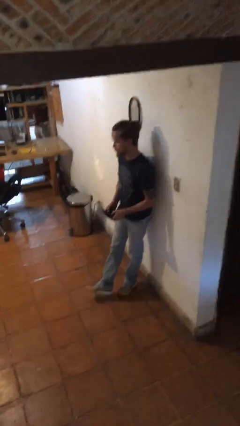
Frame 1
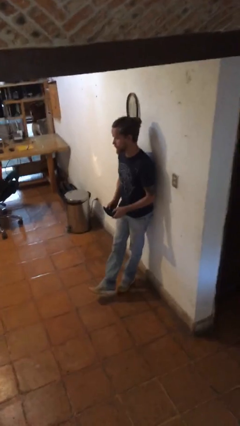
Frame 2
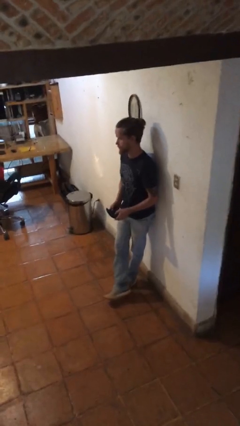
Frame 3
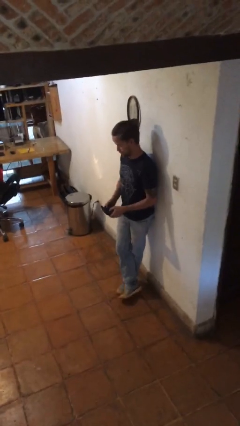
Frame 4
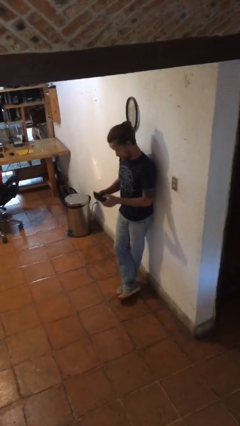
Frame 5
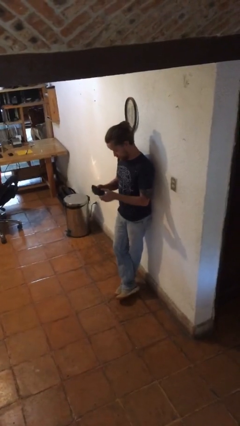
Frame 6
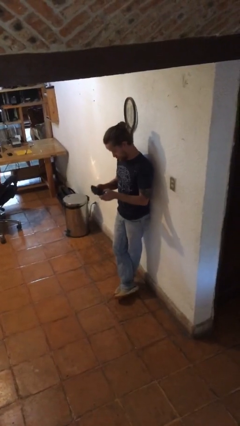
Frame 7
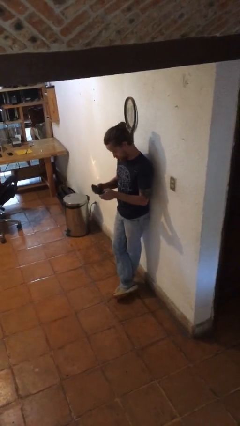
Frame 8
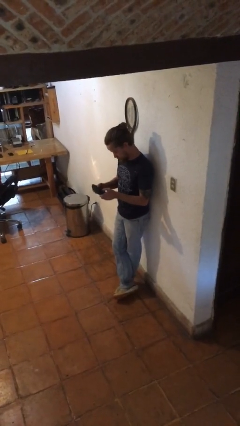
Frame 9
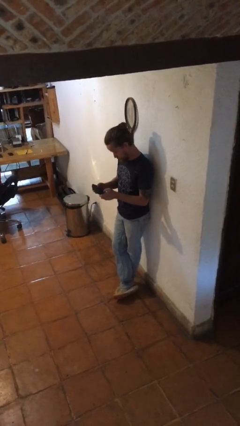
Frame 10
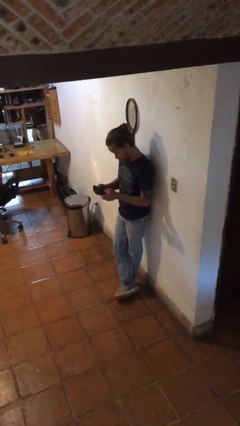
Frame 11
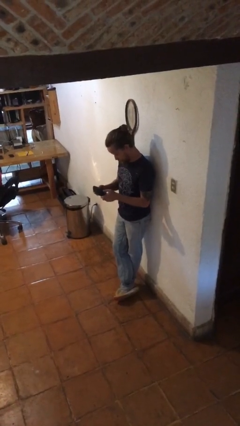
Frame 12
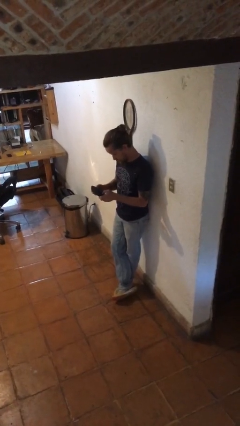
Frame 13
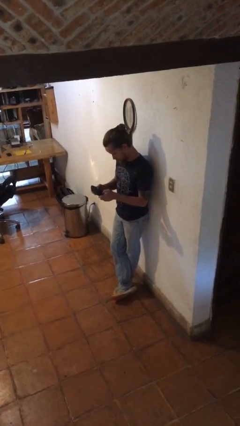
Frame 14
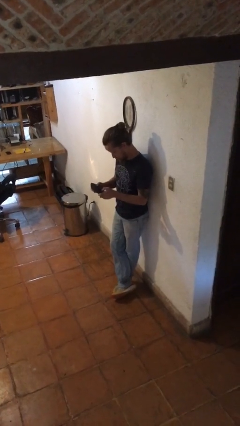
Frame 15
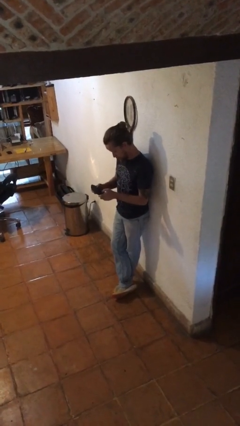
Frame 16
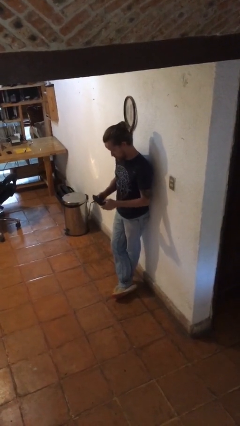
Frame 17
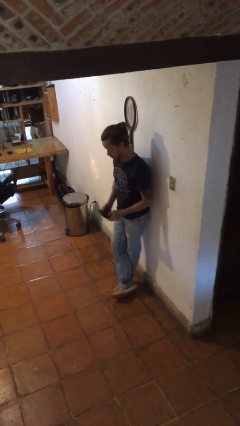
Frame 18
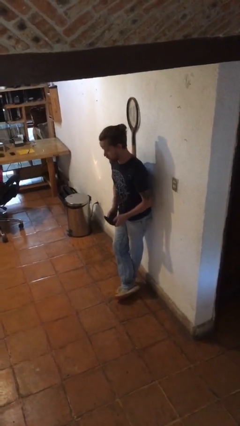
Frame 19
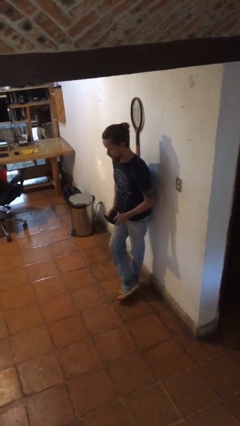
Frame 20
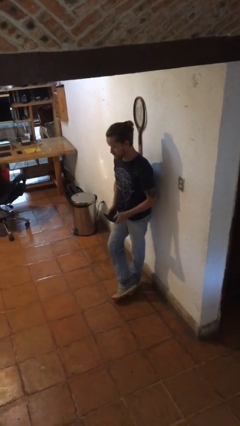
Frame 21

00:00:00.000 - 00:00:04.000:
person interacts with handheld game

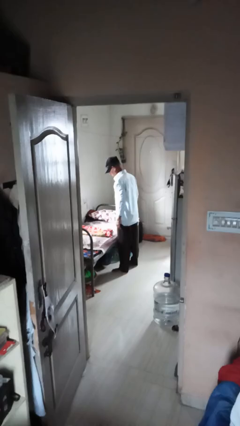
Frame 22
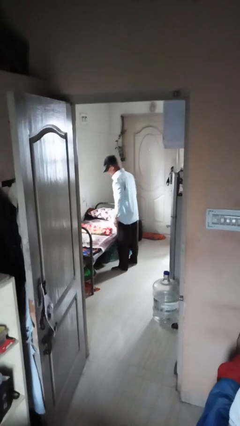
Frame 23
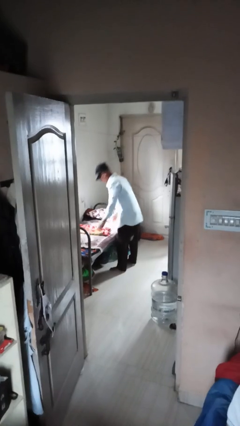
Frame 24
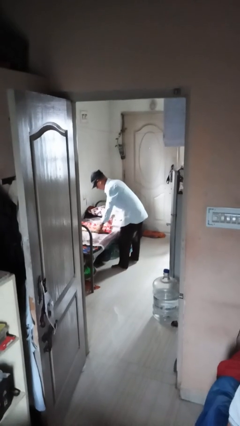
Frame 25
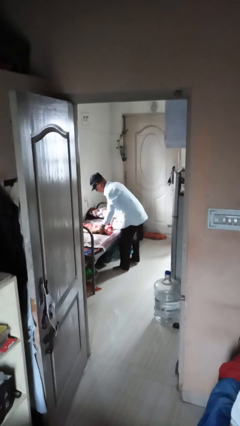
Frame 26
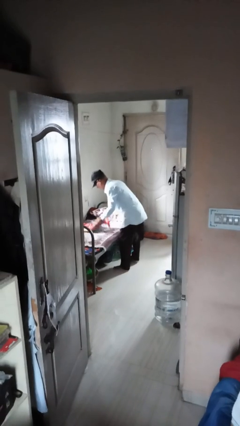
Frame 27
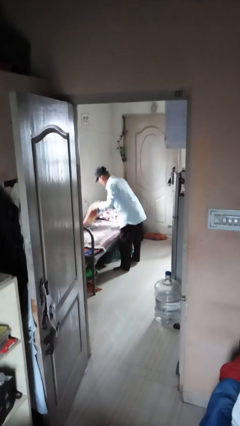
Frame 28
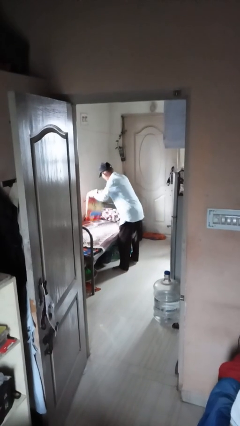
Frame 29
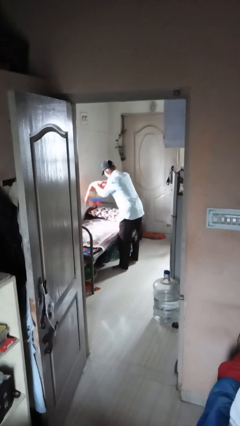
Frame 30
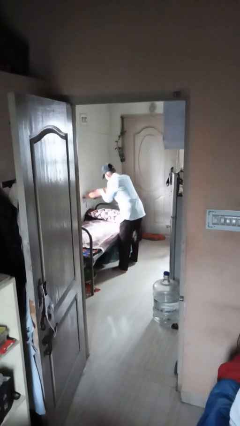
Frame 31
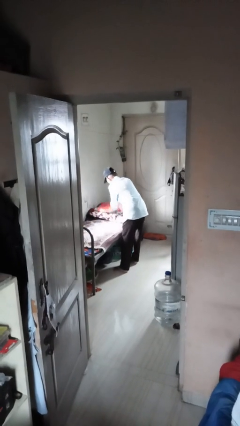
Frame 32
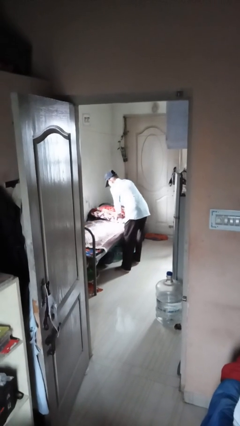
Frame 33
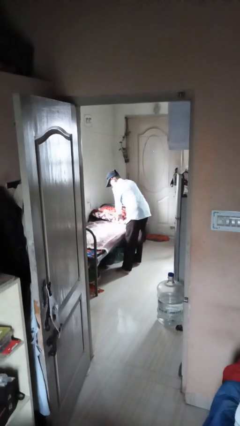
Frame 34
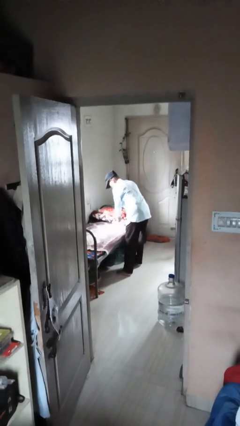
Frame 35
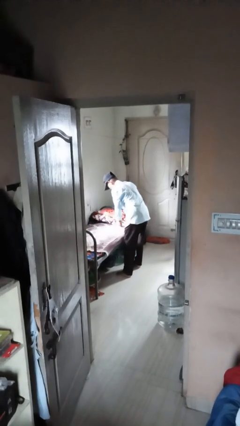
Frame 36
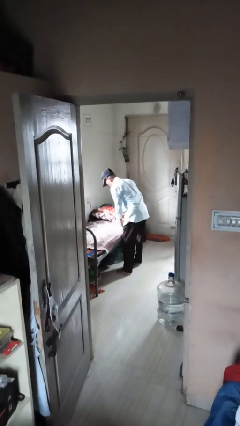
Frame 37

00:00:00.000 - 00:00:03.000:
person makes bed

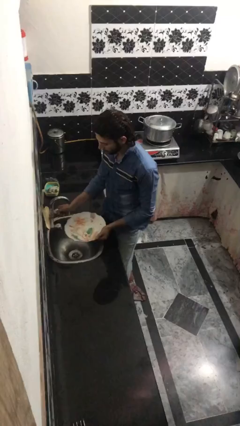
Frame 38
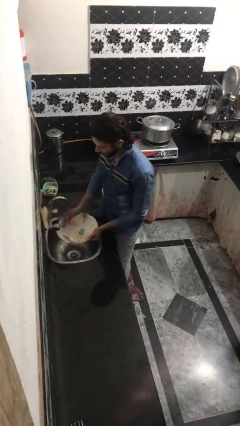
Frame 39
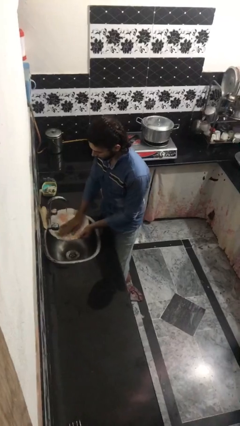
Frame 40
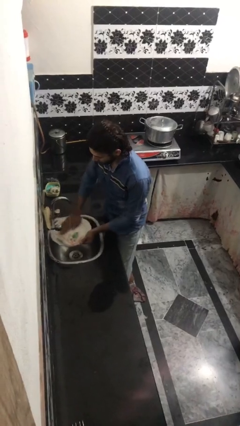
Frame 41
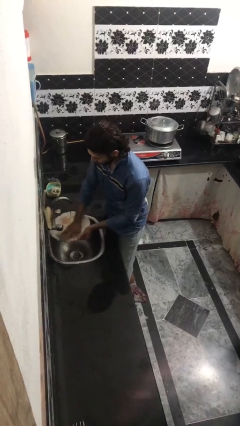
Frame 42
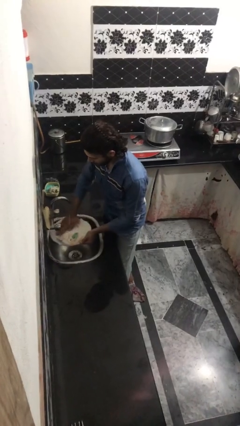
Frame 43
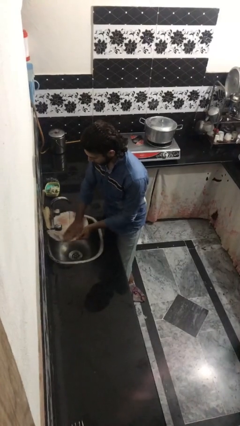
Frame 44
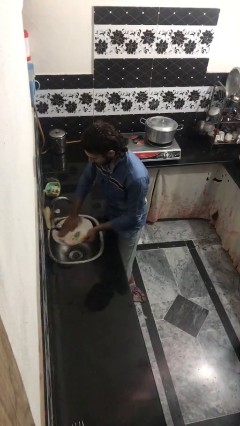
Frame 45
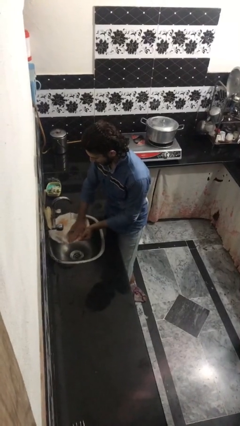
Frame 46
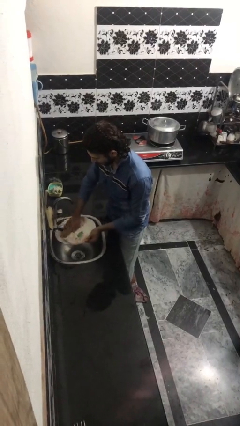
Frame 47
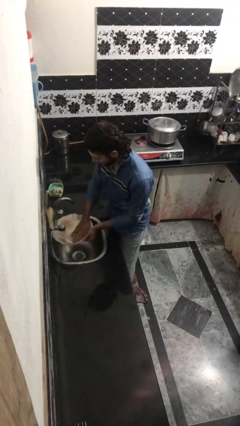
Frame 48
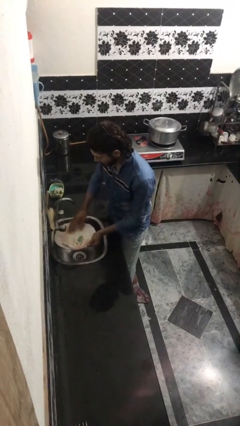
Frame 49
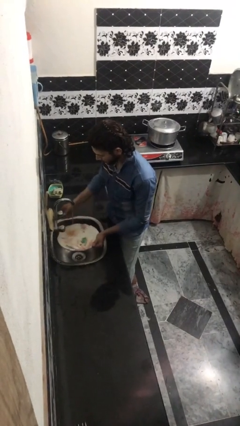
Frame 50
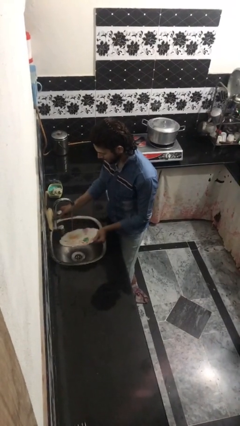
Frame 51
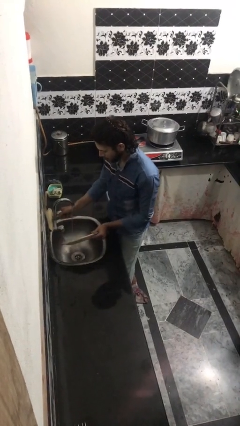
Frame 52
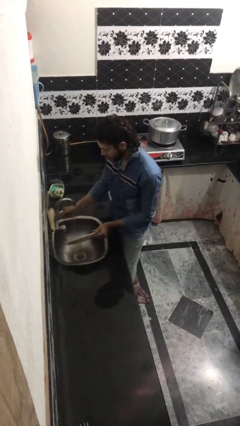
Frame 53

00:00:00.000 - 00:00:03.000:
person washes dish

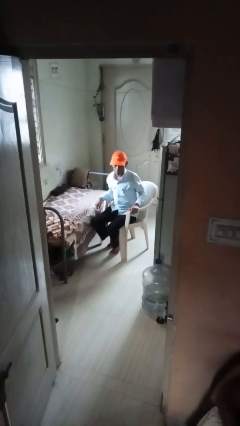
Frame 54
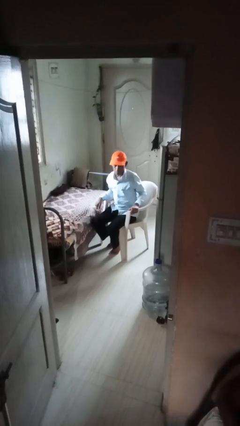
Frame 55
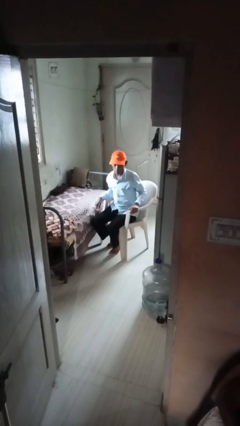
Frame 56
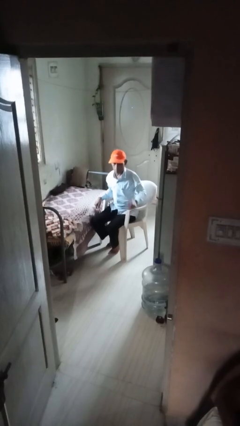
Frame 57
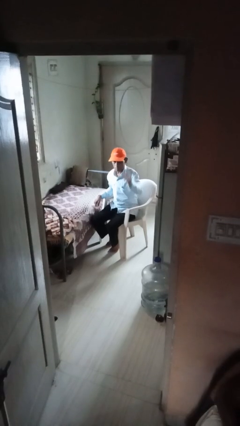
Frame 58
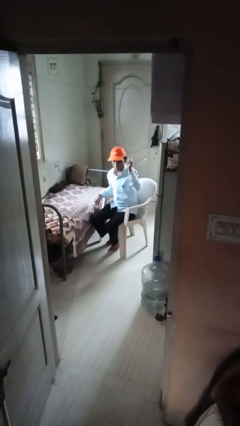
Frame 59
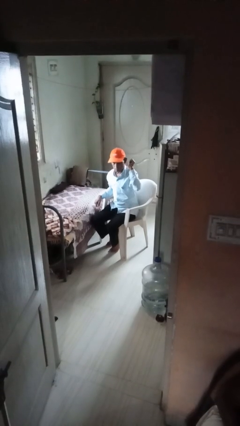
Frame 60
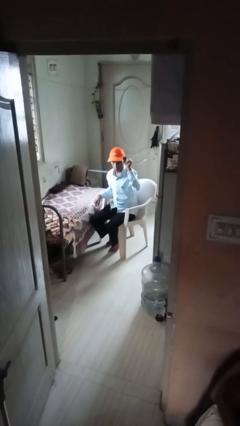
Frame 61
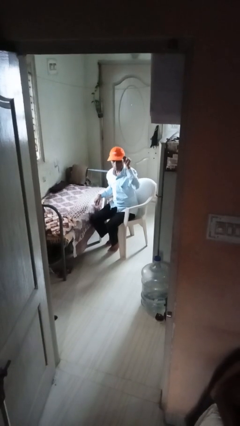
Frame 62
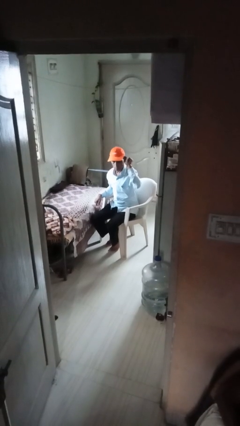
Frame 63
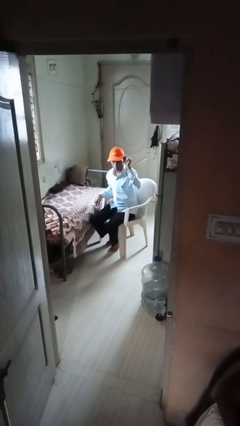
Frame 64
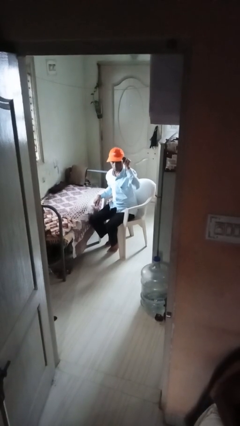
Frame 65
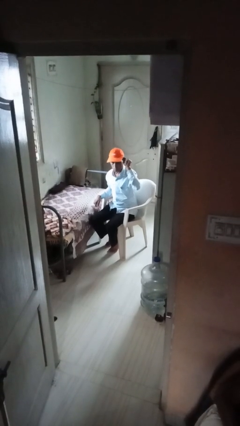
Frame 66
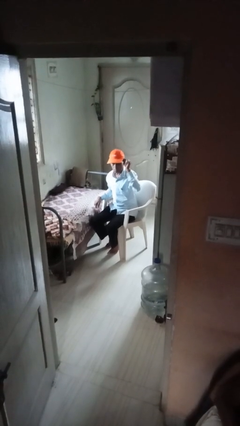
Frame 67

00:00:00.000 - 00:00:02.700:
person gestures behind me

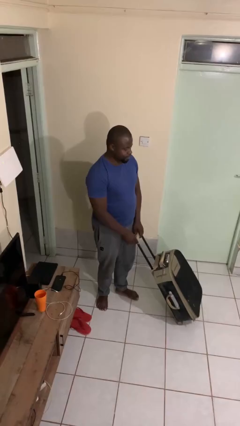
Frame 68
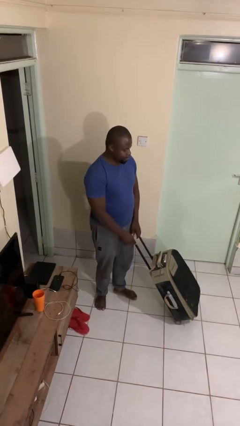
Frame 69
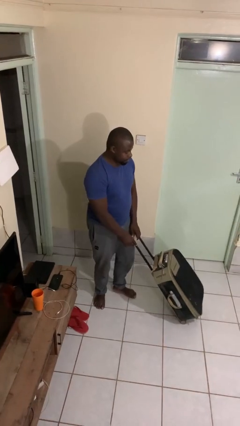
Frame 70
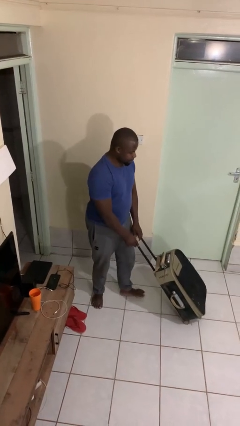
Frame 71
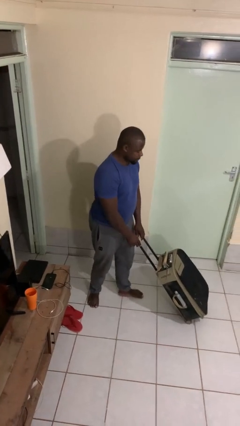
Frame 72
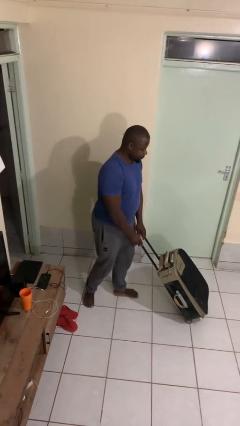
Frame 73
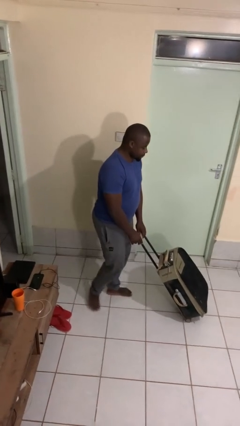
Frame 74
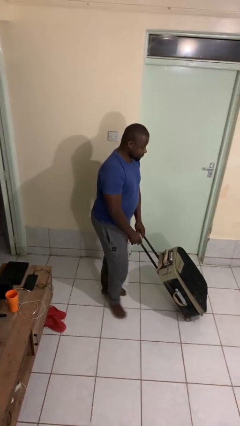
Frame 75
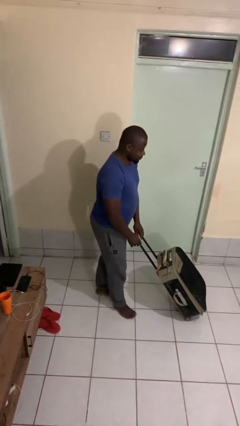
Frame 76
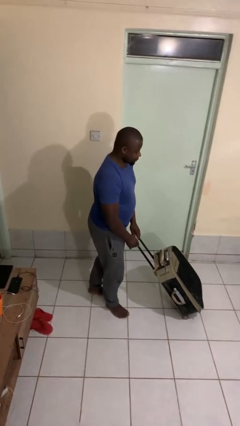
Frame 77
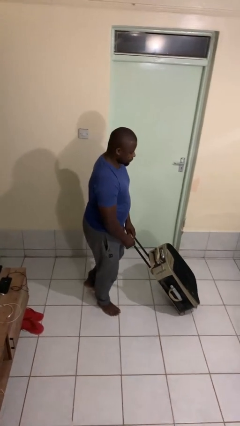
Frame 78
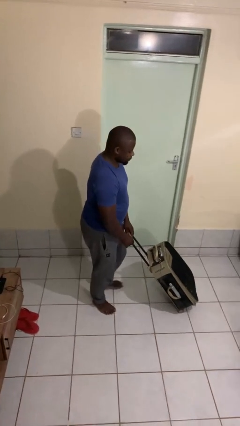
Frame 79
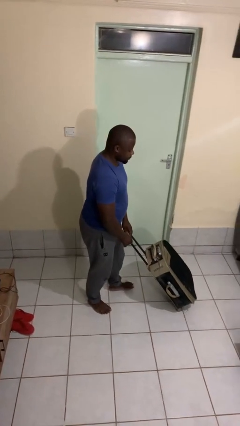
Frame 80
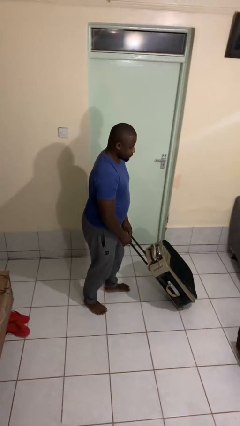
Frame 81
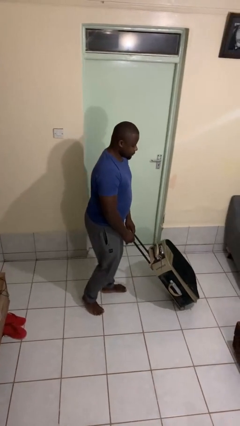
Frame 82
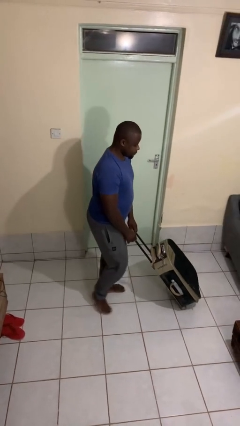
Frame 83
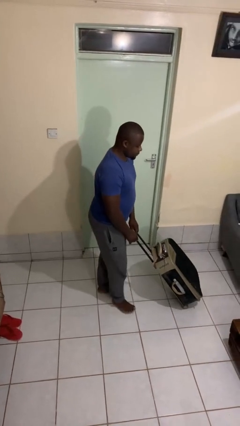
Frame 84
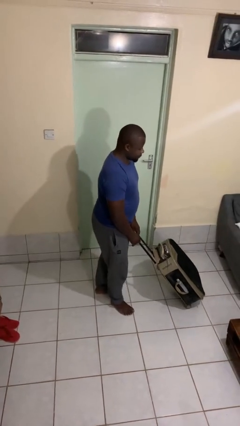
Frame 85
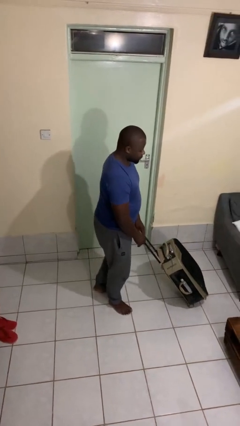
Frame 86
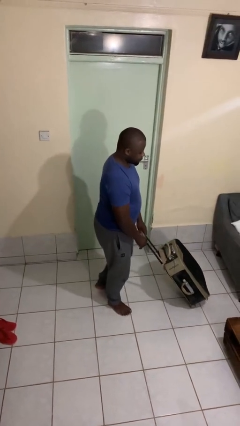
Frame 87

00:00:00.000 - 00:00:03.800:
person pushes wheeled cart

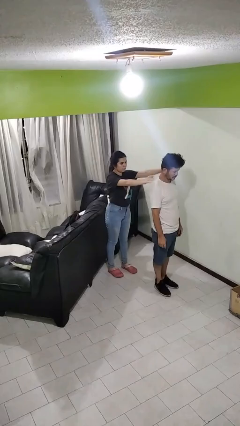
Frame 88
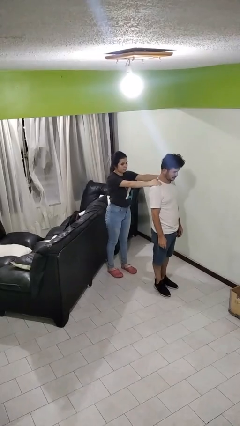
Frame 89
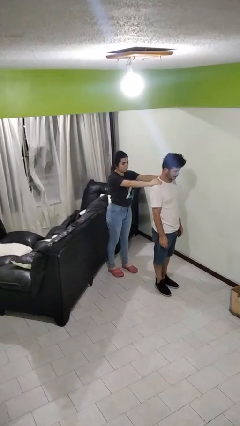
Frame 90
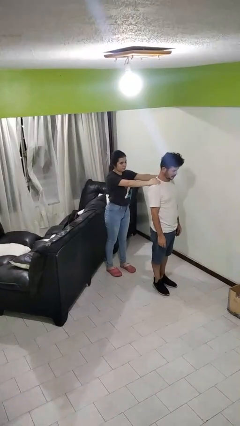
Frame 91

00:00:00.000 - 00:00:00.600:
person grabs person by shoulder

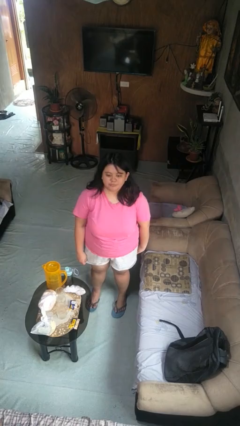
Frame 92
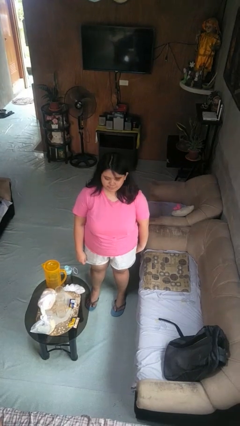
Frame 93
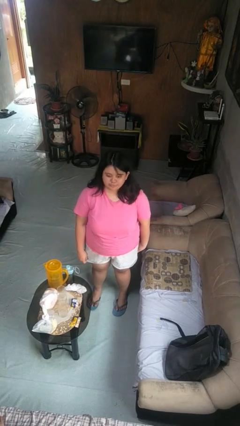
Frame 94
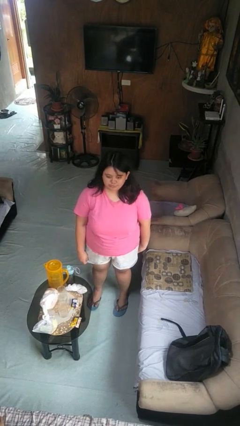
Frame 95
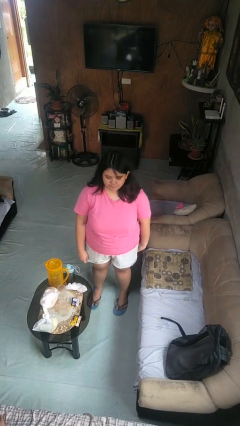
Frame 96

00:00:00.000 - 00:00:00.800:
person nods head
